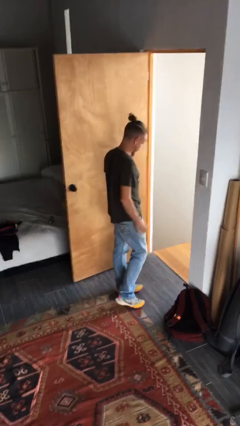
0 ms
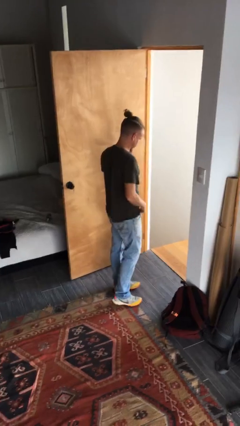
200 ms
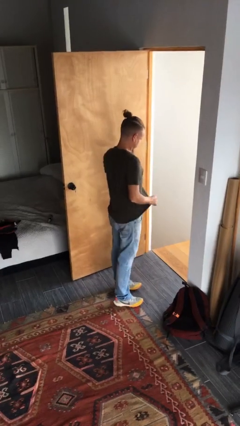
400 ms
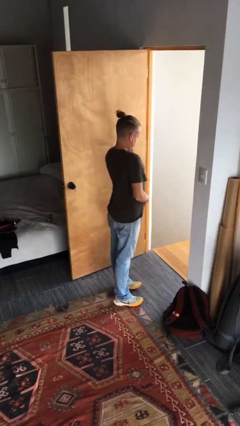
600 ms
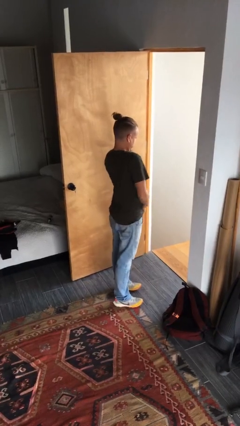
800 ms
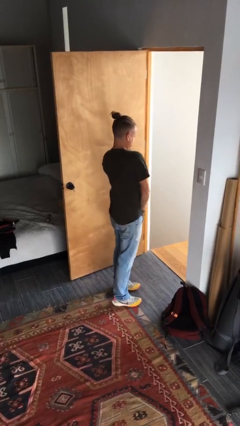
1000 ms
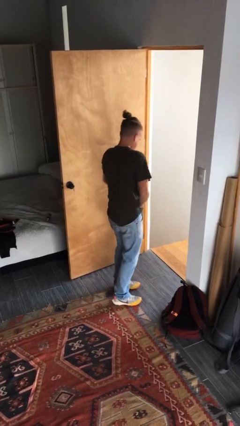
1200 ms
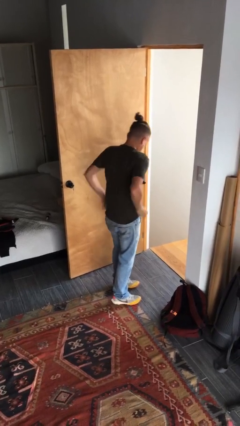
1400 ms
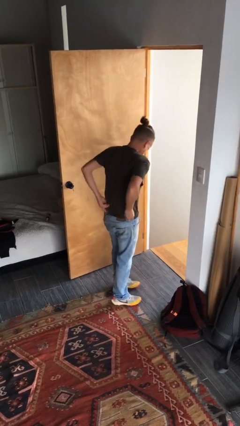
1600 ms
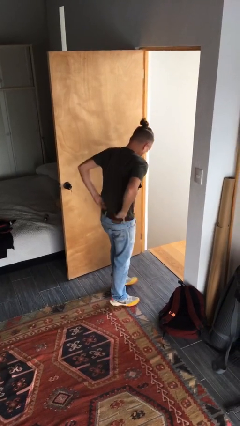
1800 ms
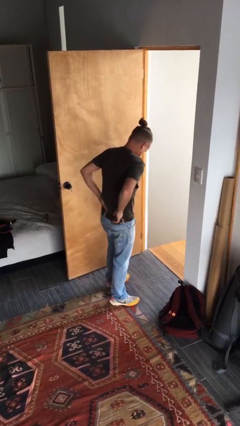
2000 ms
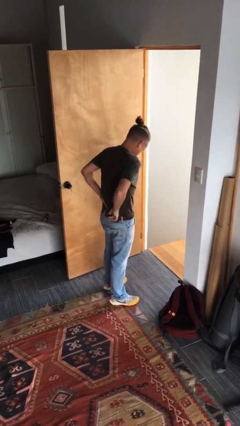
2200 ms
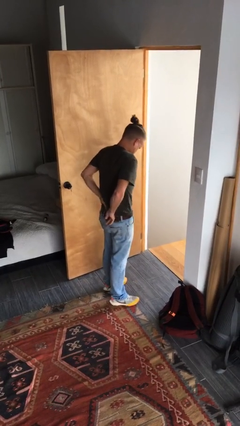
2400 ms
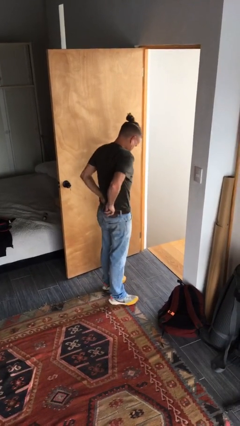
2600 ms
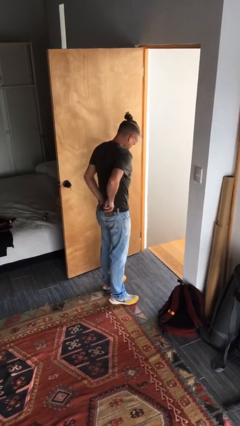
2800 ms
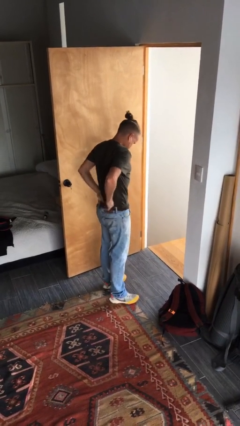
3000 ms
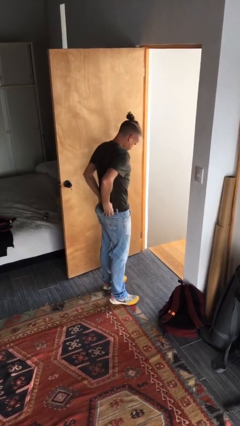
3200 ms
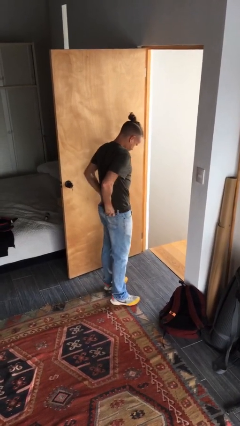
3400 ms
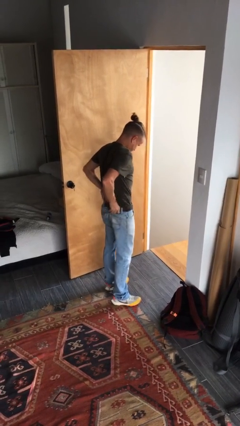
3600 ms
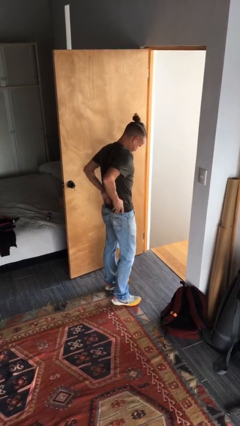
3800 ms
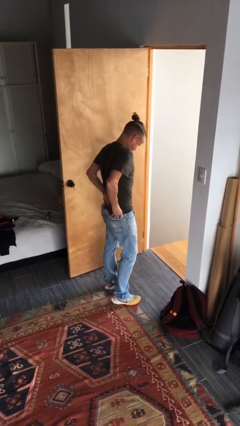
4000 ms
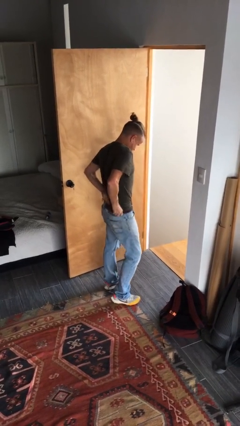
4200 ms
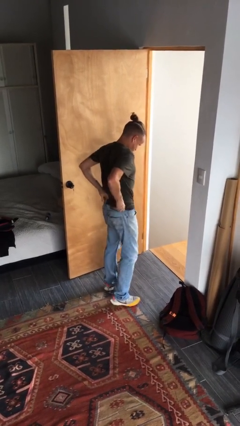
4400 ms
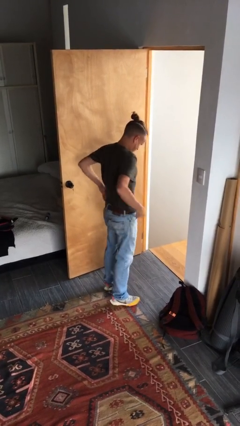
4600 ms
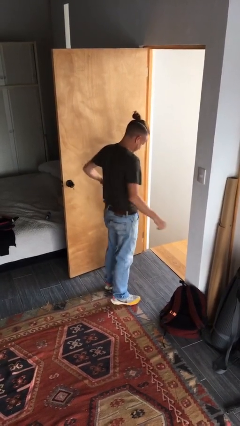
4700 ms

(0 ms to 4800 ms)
person tucks in shirt

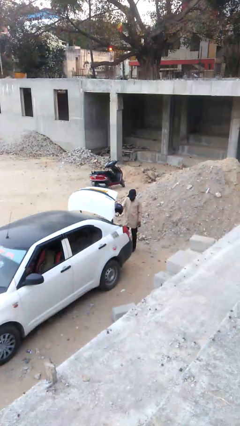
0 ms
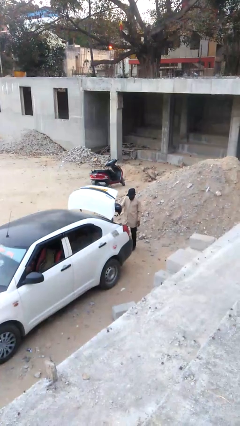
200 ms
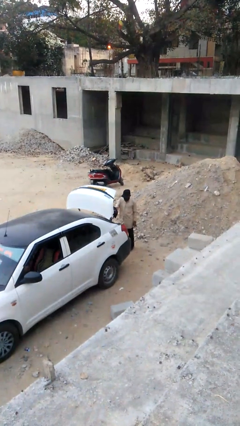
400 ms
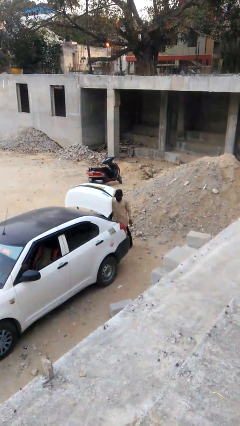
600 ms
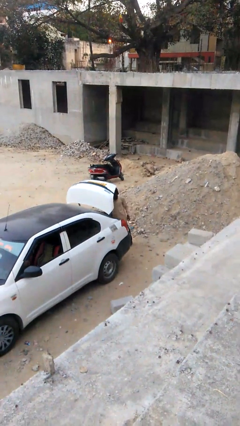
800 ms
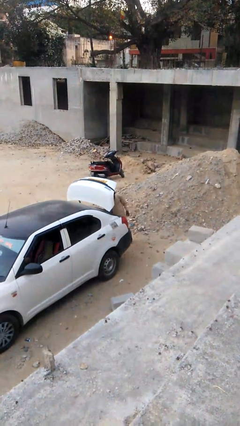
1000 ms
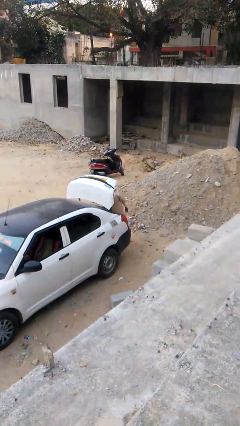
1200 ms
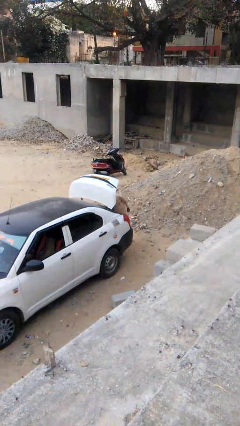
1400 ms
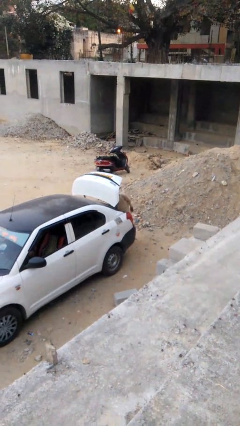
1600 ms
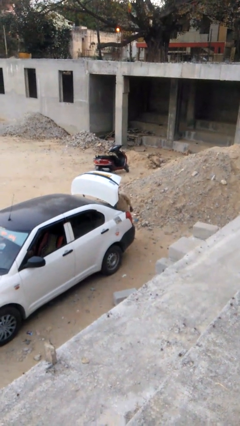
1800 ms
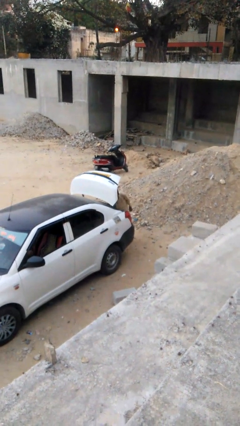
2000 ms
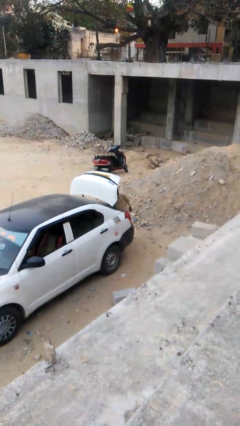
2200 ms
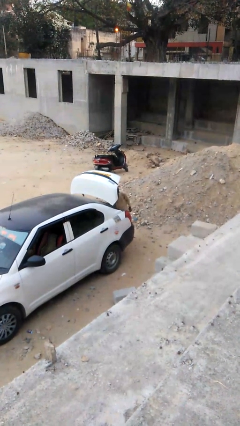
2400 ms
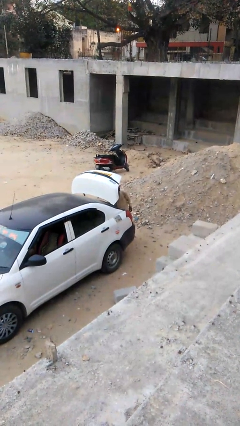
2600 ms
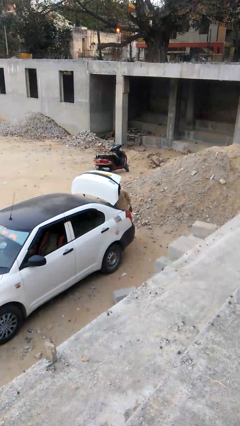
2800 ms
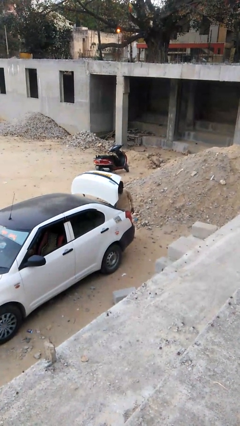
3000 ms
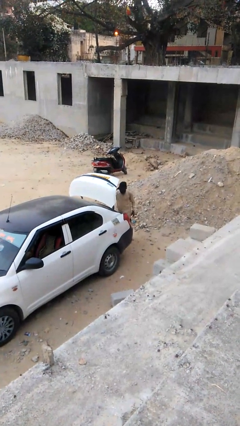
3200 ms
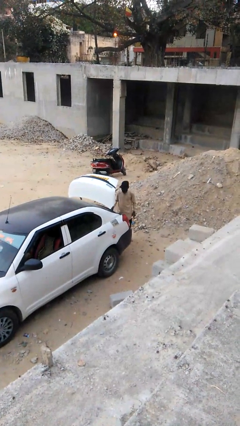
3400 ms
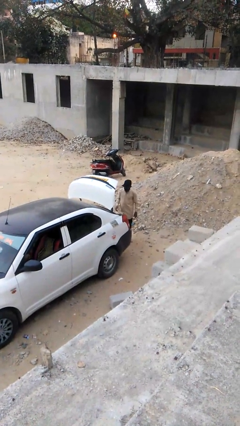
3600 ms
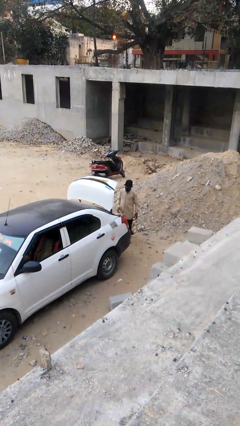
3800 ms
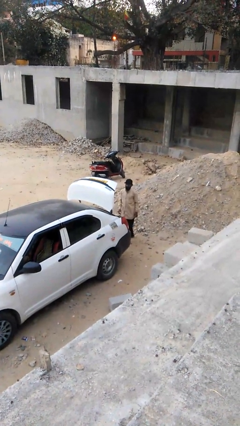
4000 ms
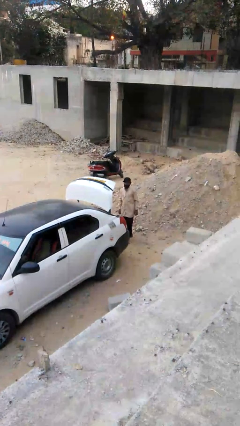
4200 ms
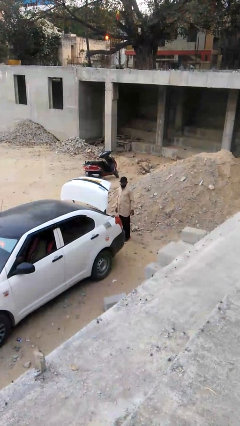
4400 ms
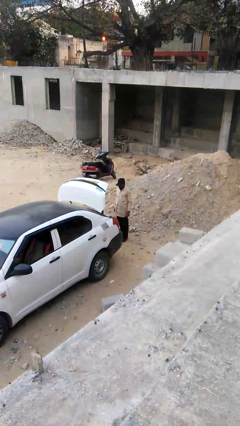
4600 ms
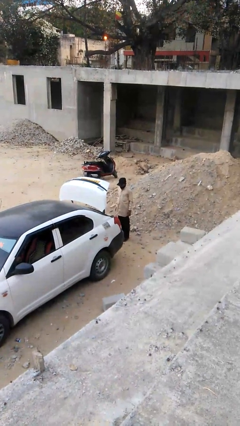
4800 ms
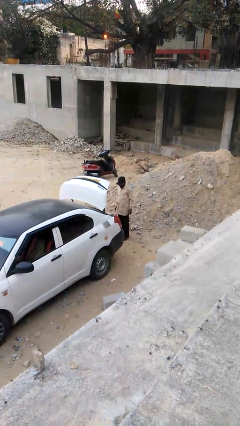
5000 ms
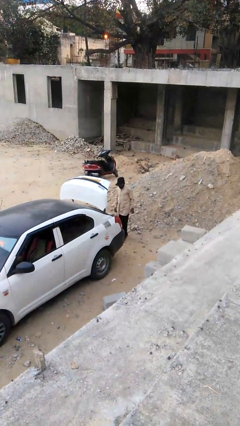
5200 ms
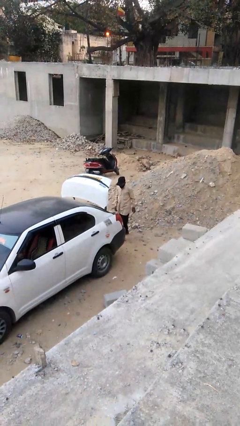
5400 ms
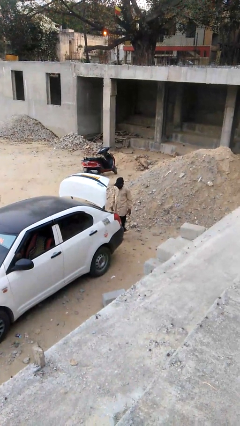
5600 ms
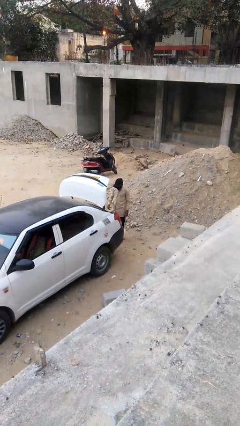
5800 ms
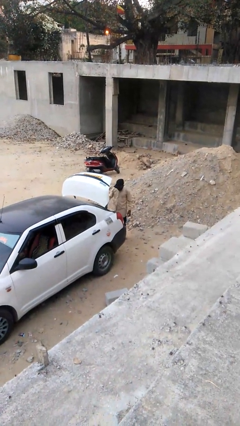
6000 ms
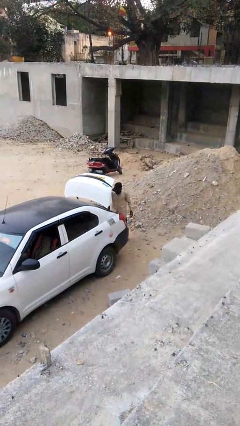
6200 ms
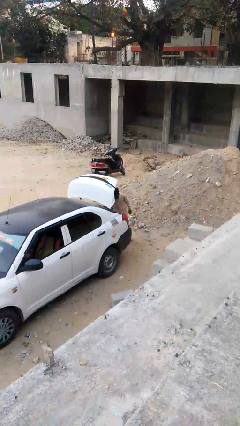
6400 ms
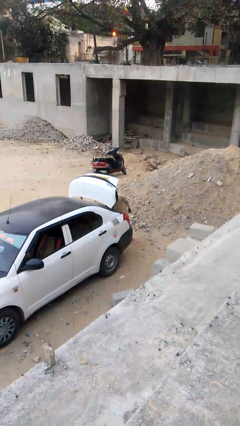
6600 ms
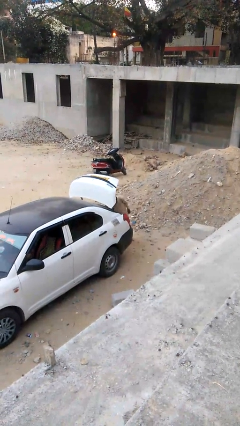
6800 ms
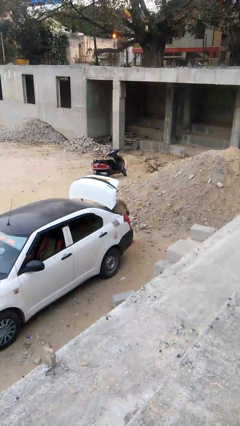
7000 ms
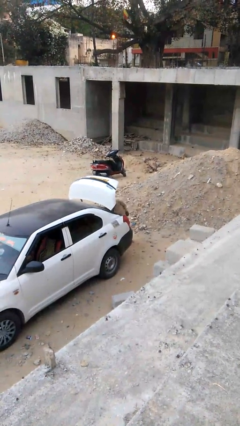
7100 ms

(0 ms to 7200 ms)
person loads car

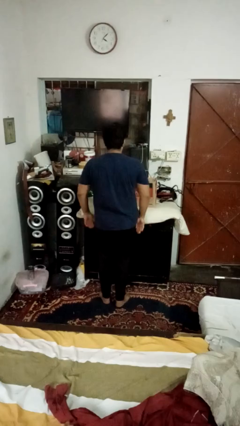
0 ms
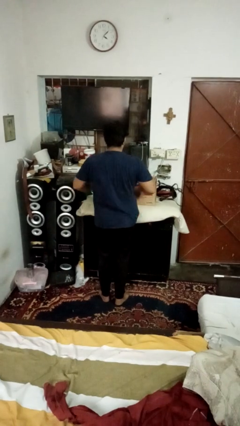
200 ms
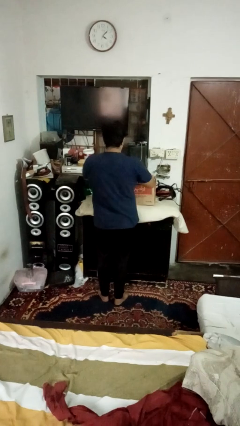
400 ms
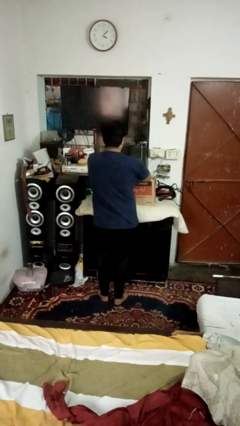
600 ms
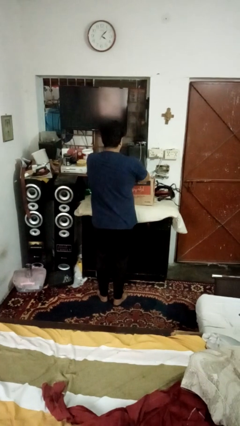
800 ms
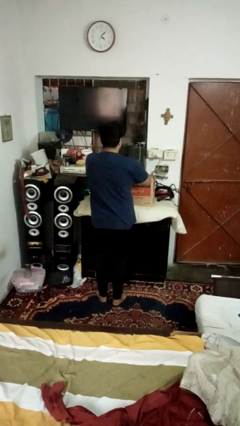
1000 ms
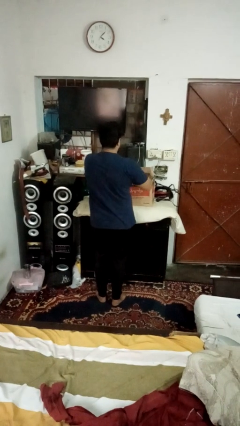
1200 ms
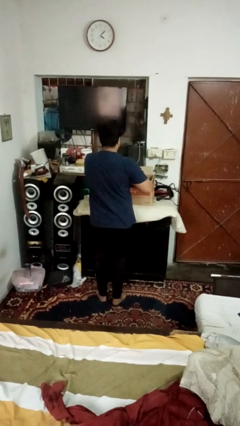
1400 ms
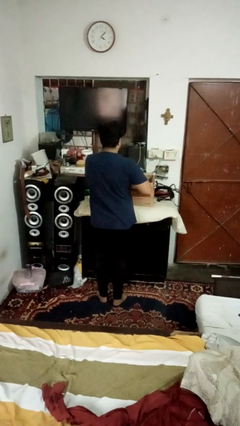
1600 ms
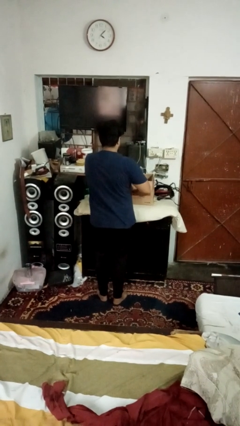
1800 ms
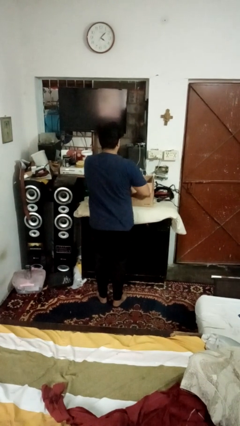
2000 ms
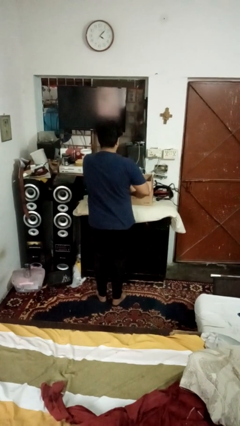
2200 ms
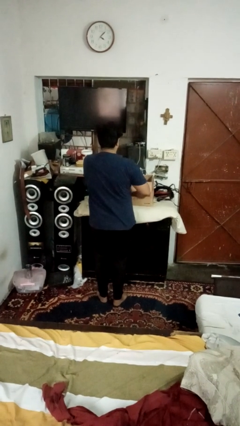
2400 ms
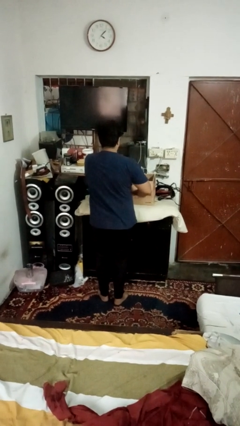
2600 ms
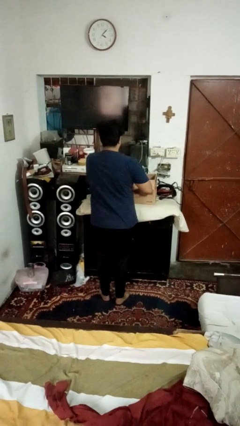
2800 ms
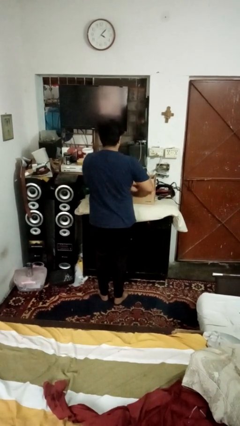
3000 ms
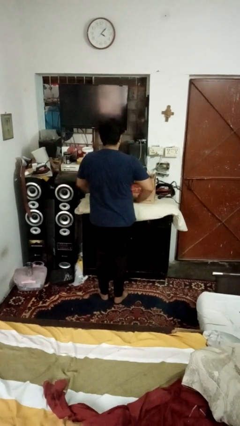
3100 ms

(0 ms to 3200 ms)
person opens box

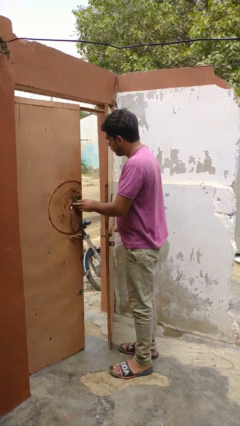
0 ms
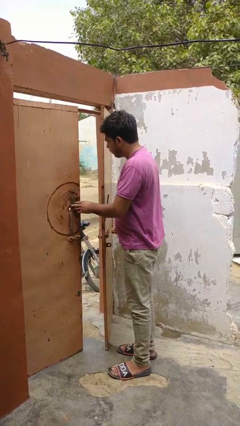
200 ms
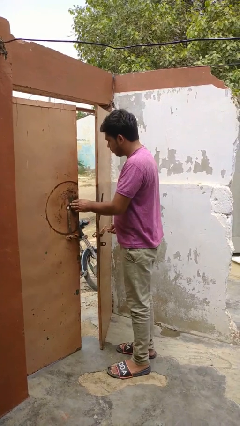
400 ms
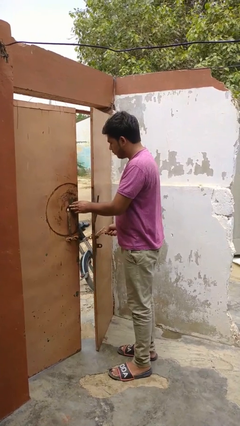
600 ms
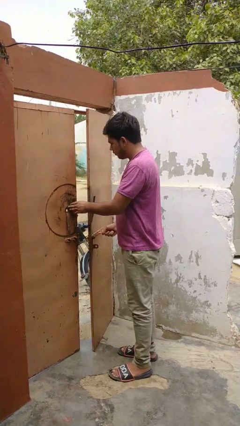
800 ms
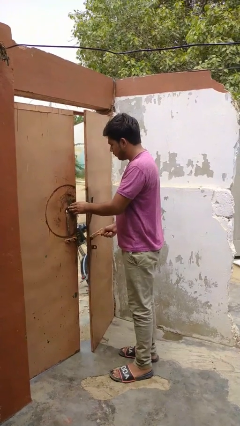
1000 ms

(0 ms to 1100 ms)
person opens facility door

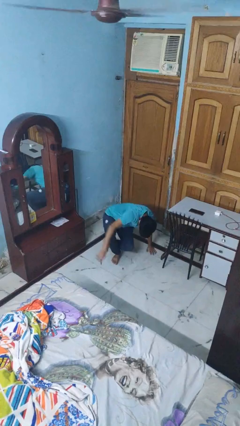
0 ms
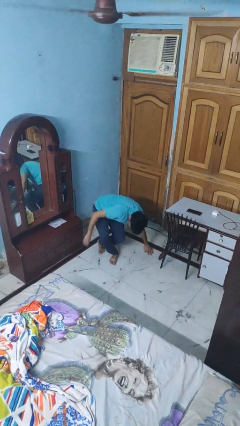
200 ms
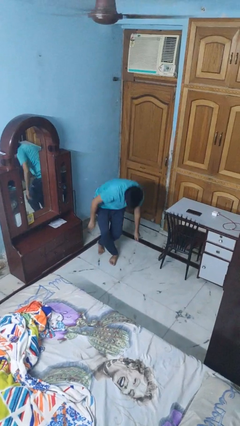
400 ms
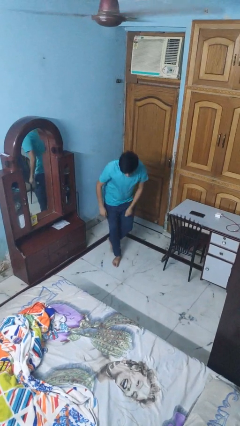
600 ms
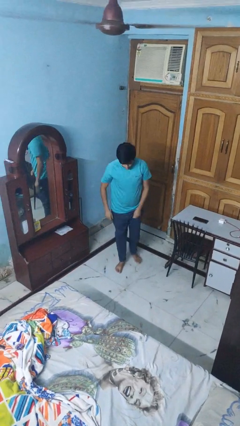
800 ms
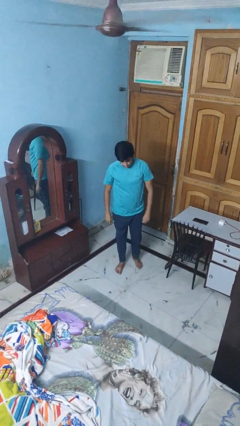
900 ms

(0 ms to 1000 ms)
person stands up from floor
